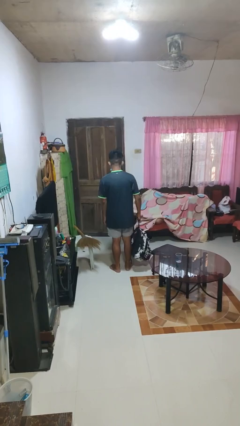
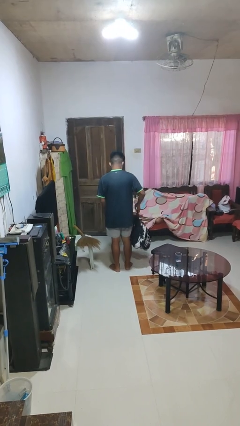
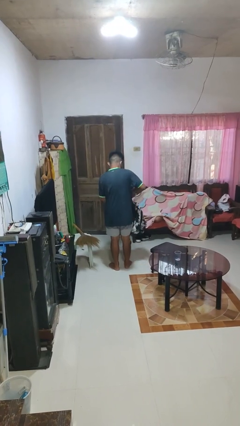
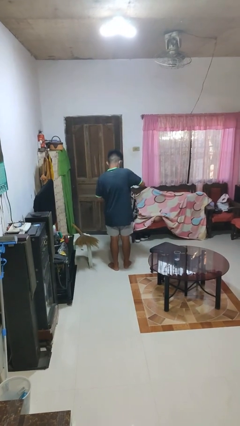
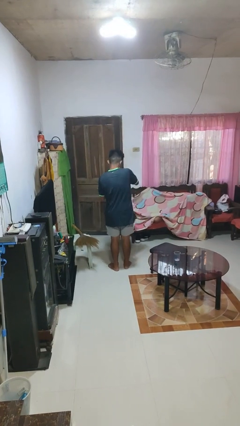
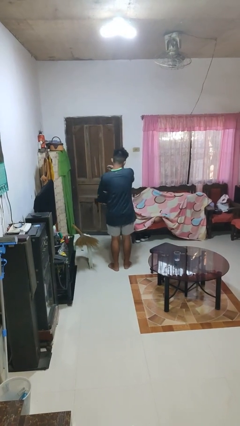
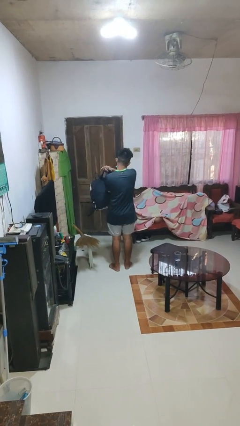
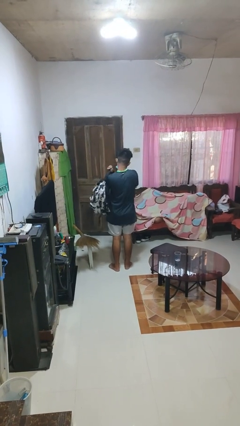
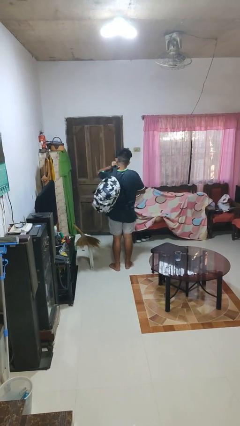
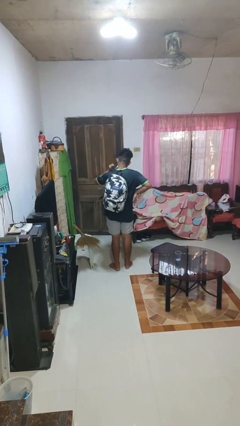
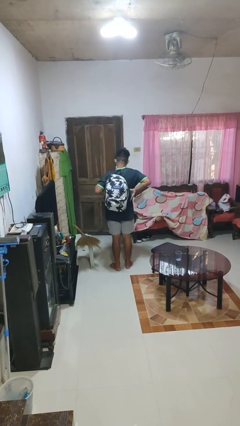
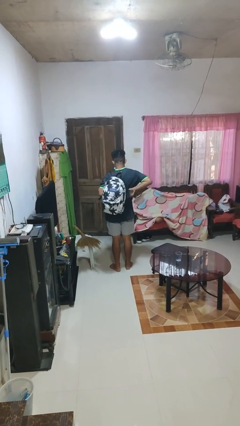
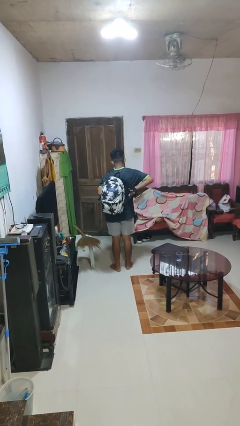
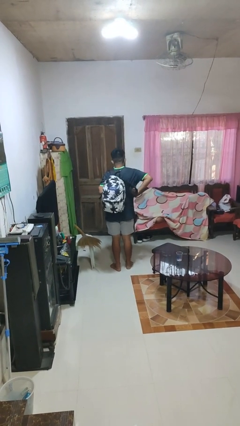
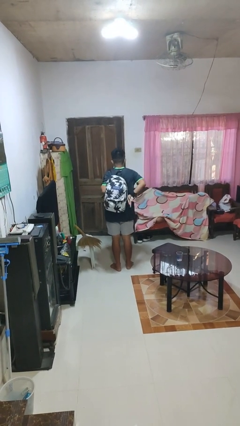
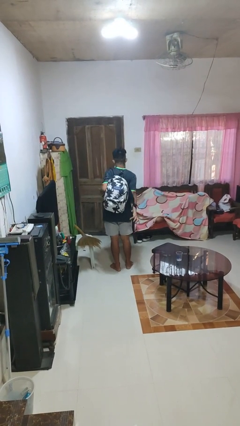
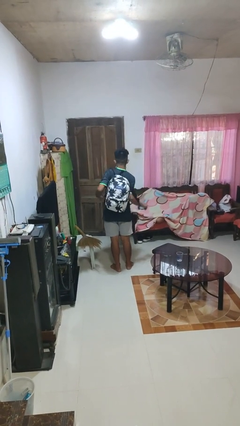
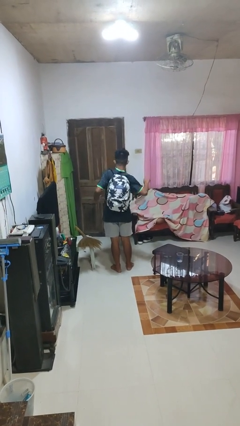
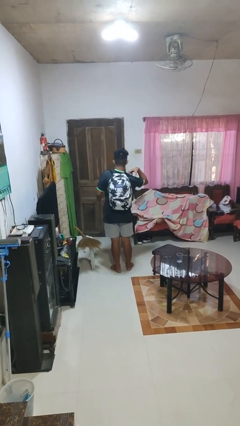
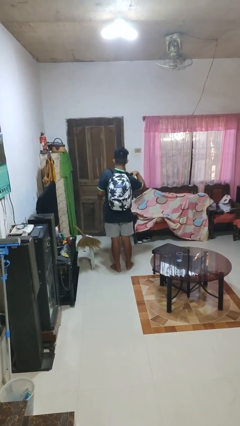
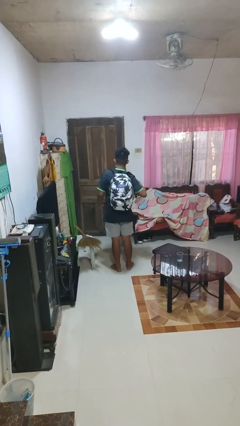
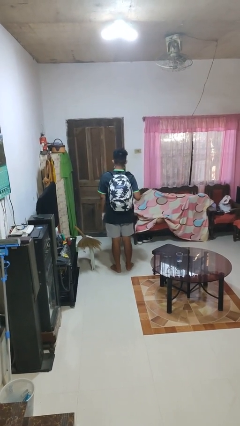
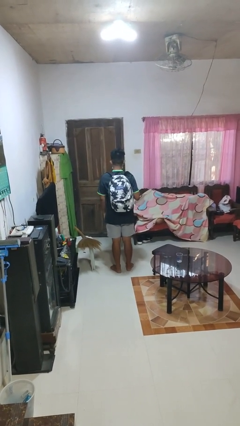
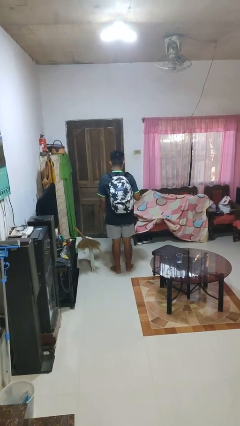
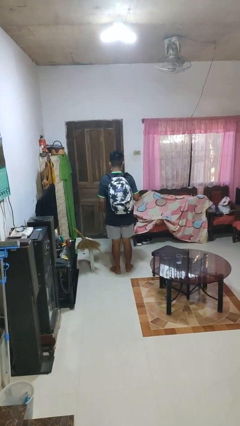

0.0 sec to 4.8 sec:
person puts on backpack

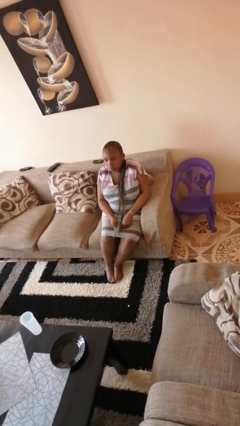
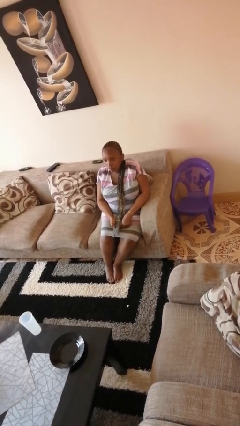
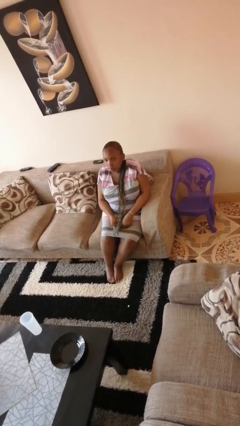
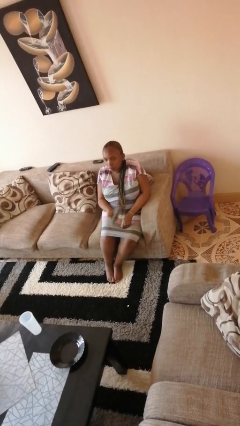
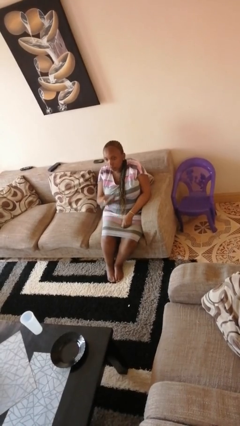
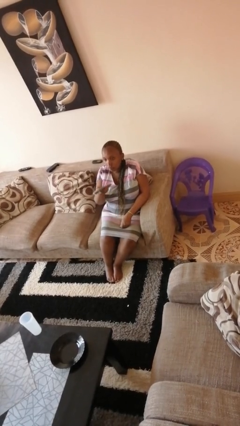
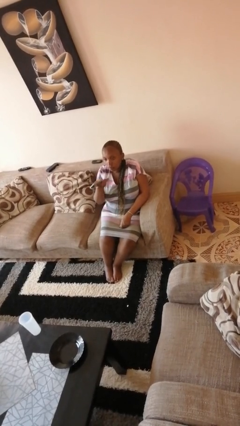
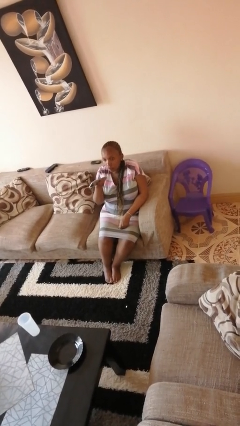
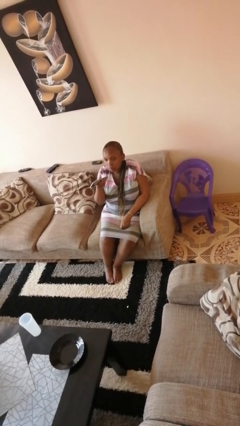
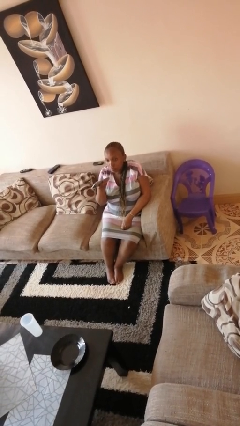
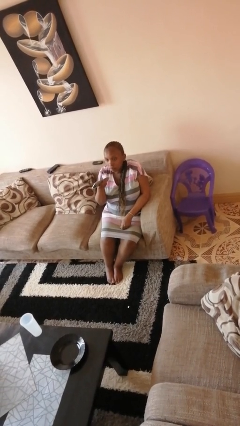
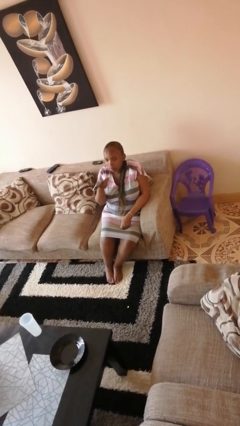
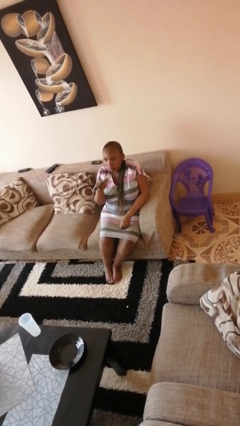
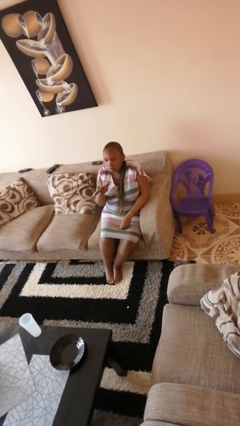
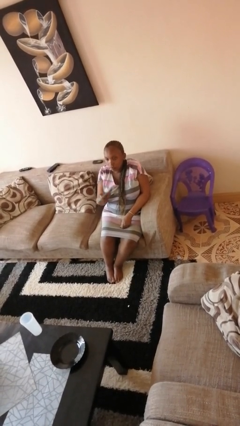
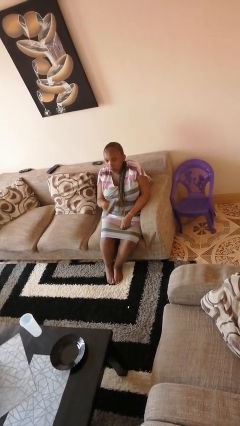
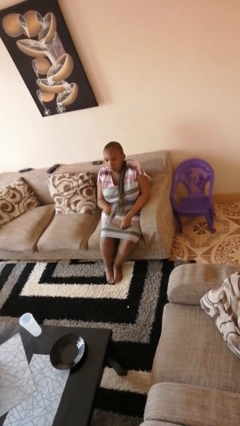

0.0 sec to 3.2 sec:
person uses television remote

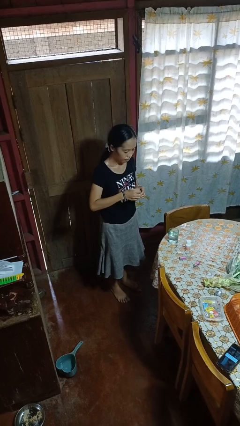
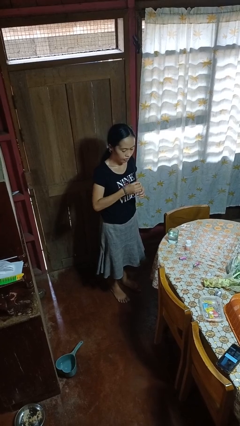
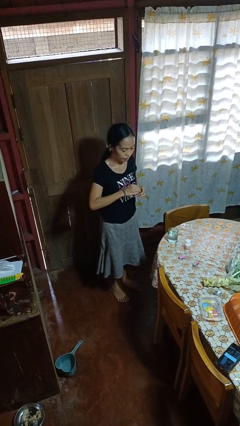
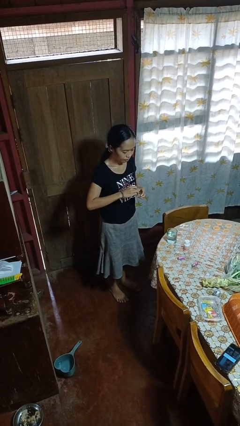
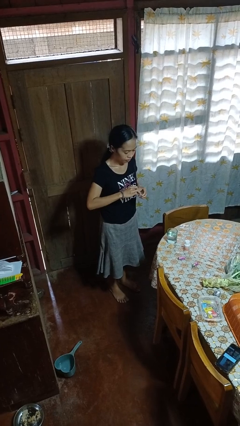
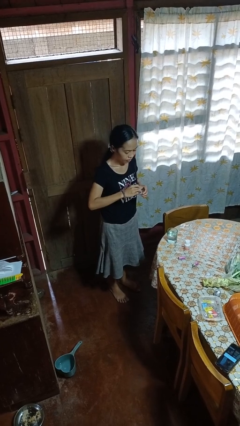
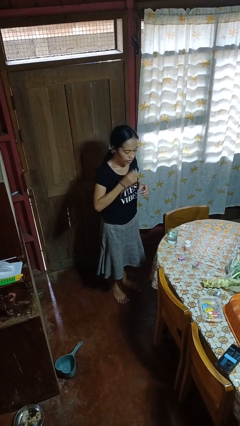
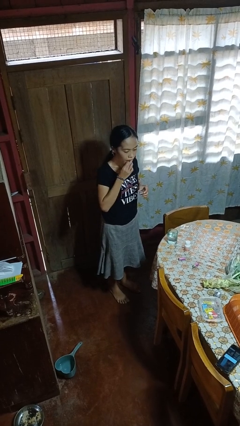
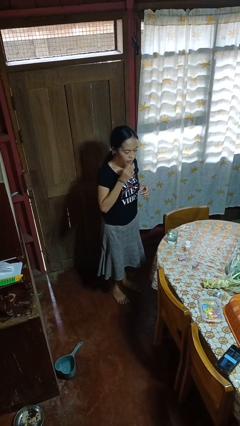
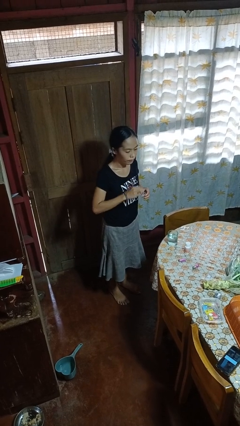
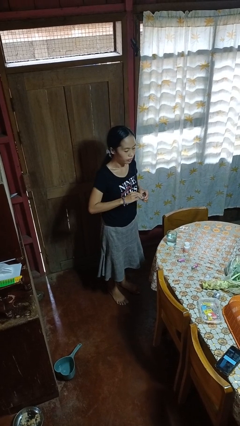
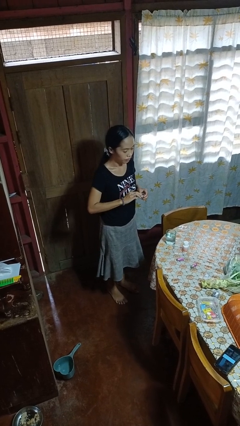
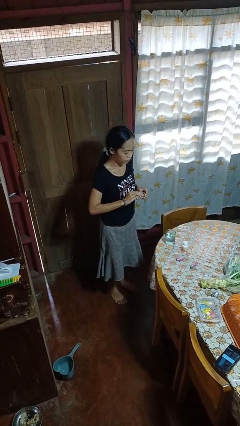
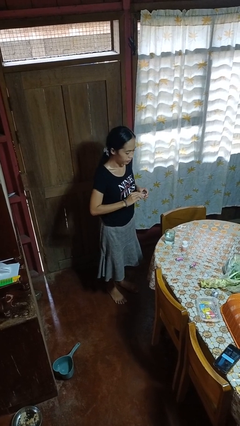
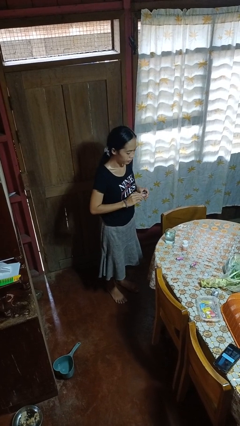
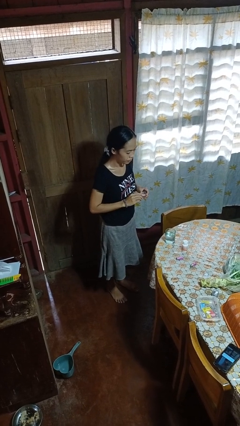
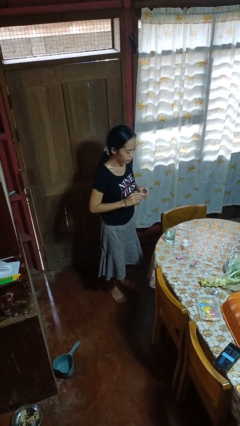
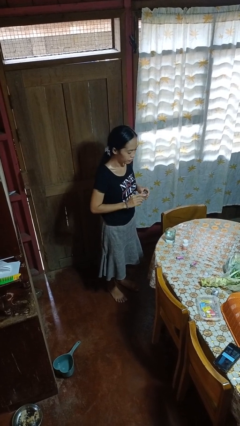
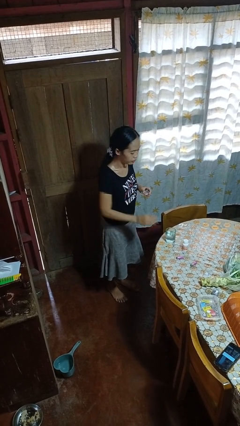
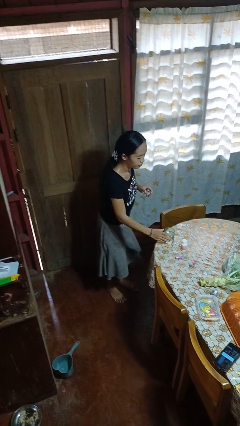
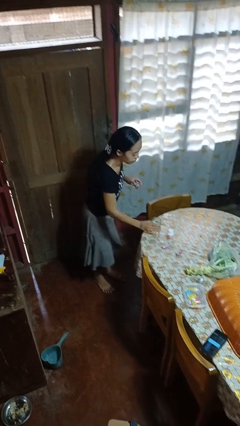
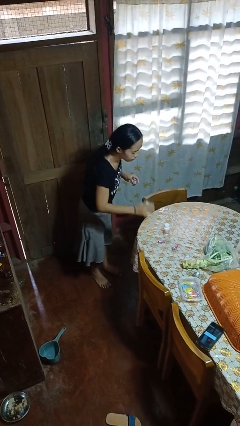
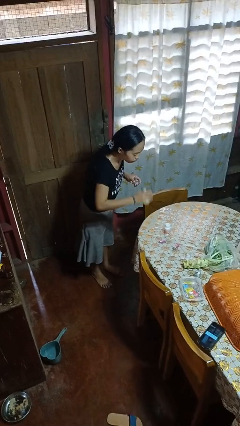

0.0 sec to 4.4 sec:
person takes medicine pills

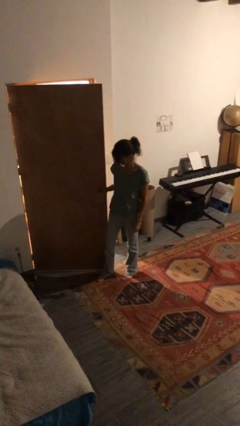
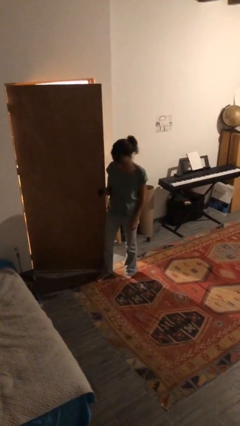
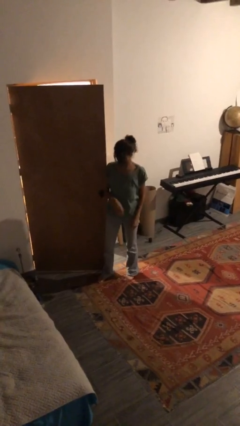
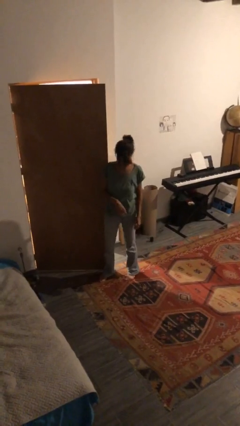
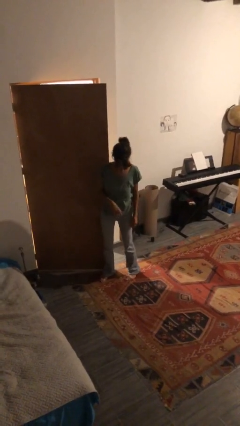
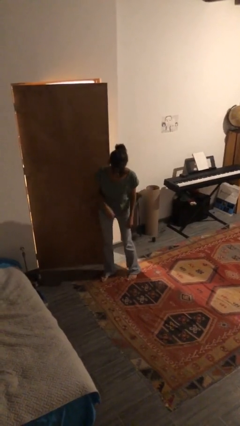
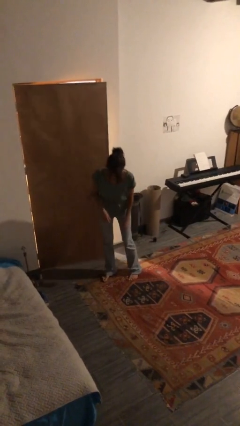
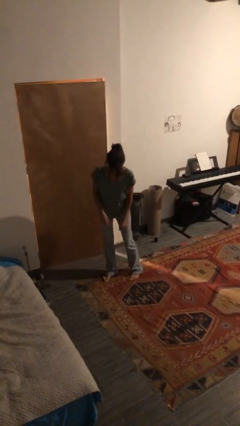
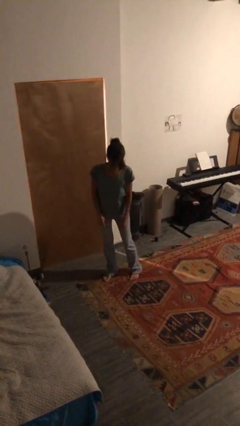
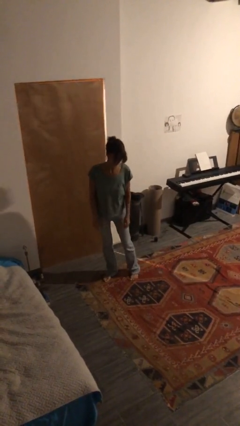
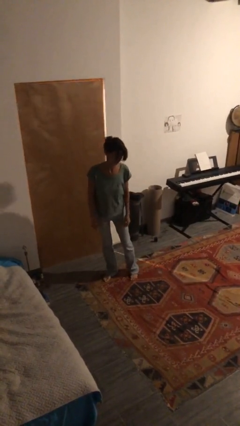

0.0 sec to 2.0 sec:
person closes door with hip

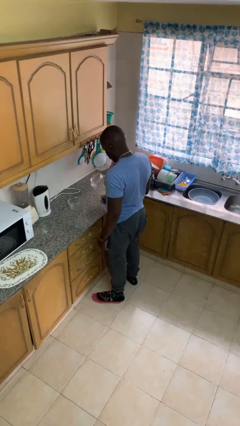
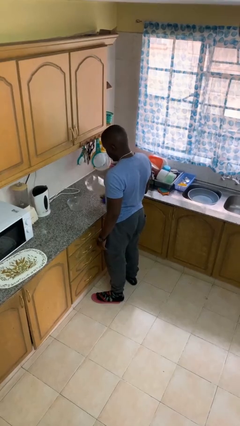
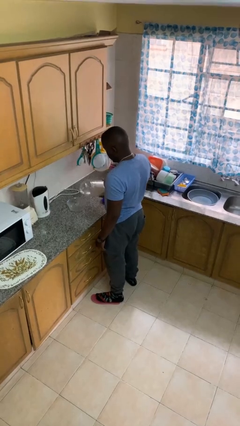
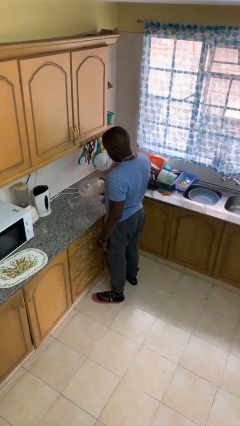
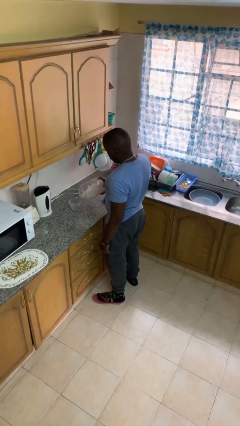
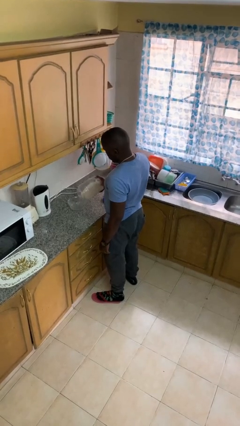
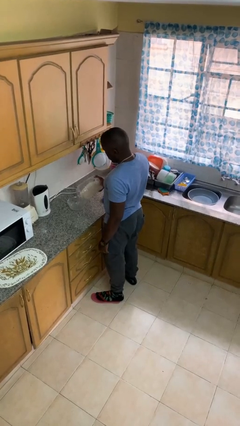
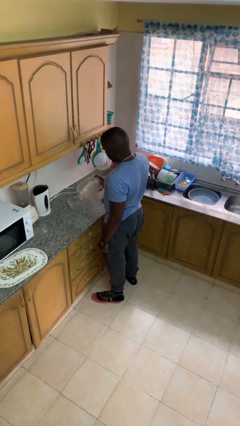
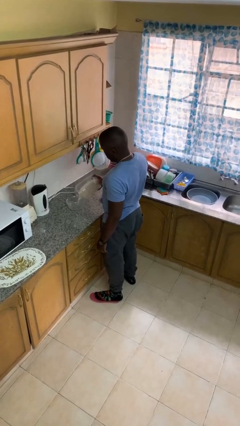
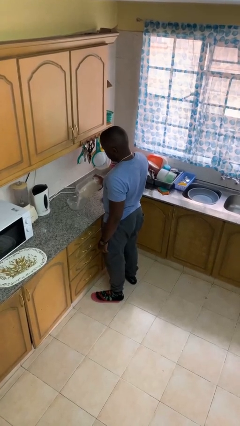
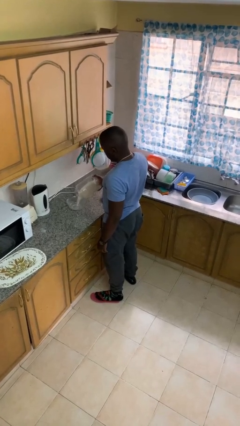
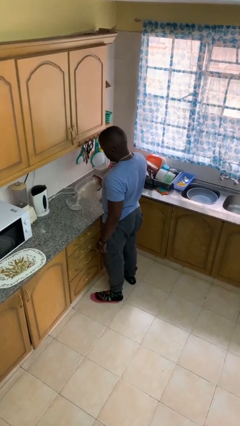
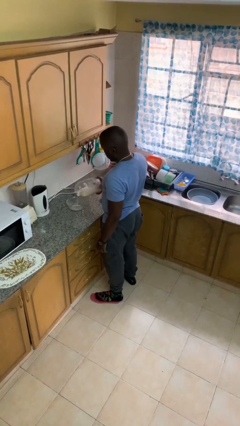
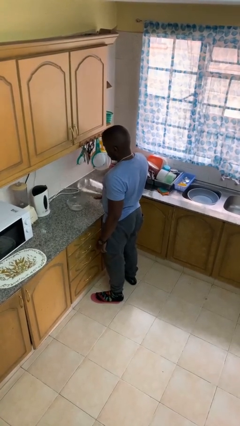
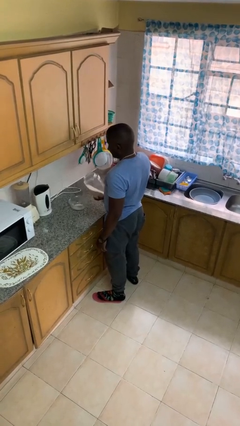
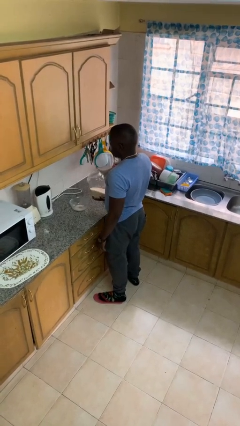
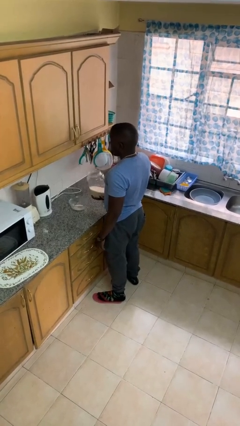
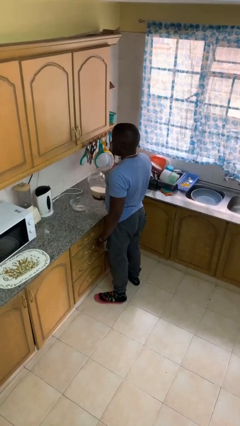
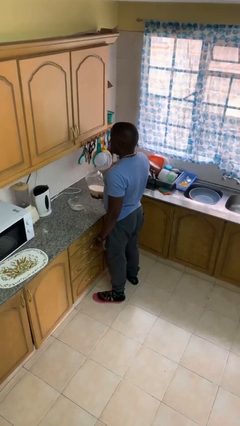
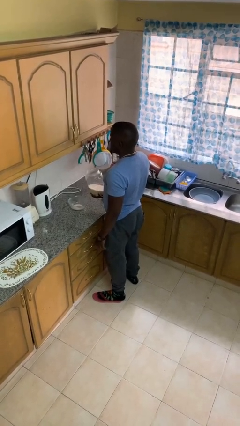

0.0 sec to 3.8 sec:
person pours into bowl
